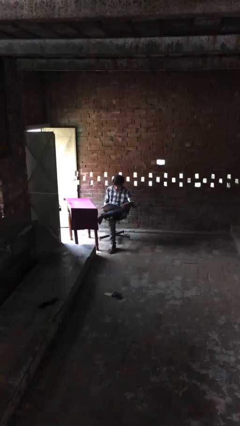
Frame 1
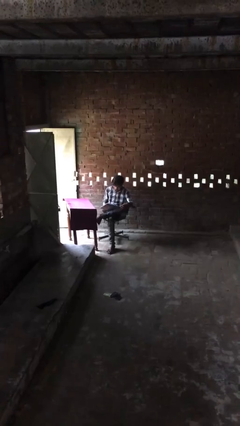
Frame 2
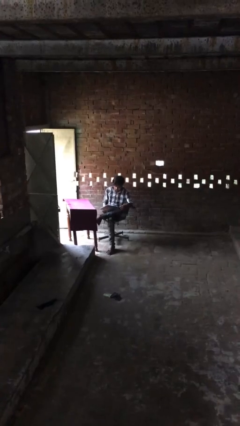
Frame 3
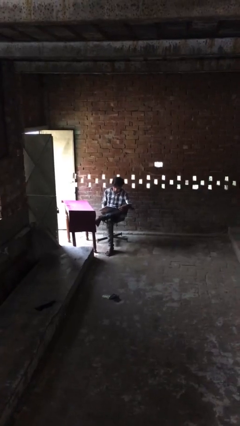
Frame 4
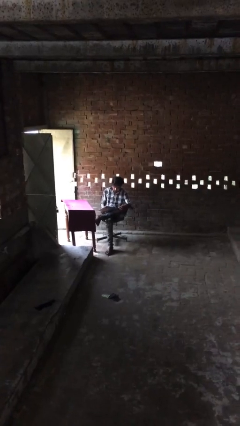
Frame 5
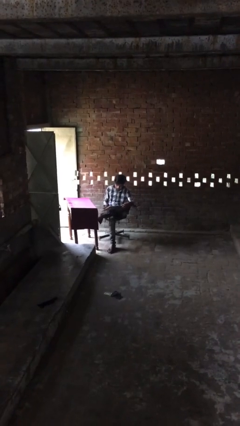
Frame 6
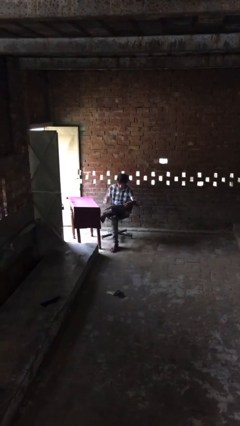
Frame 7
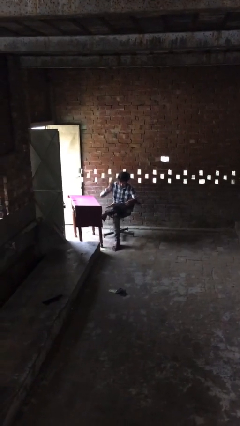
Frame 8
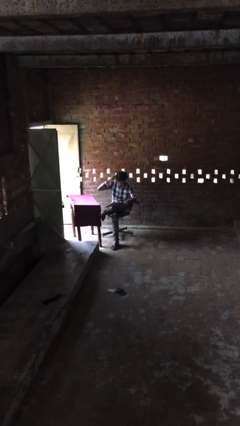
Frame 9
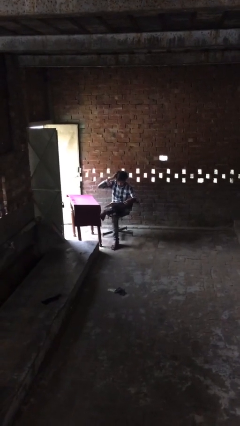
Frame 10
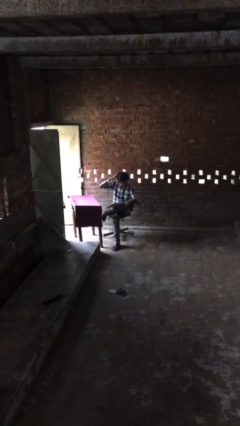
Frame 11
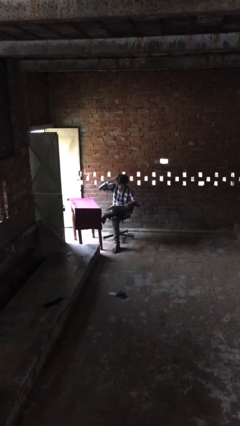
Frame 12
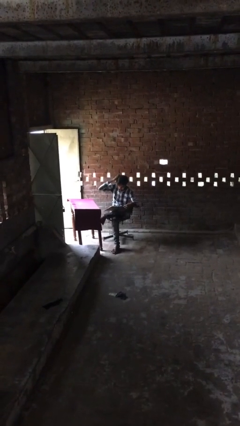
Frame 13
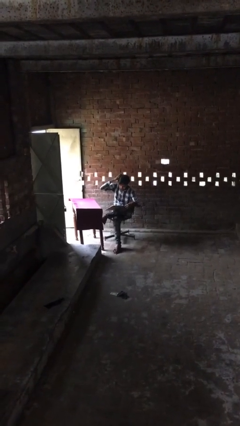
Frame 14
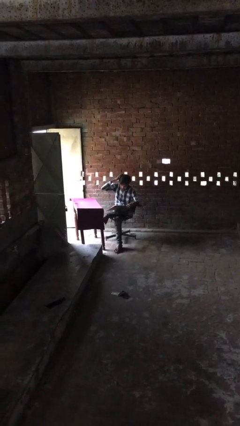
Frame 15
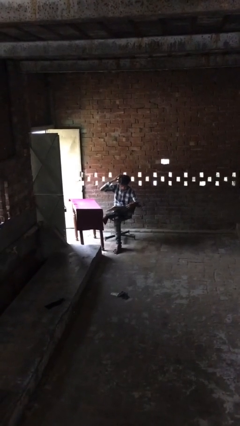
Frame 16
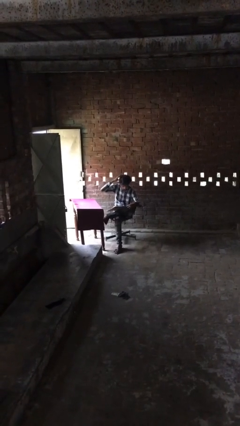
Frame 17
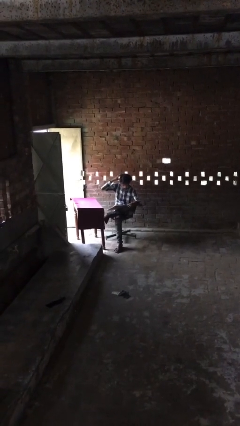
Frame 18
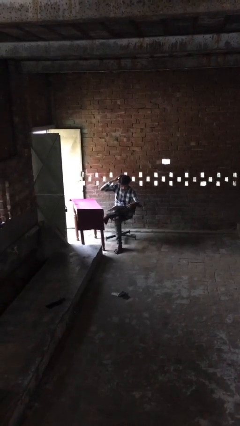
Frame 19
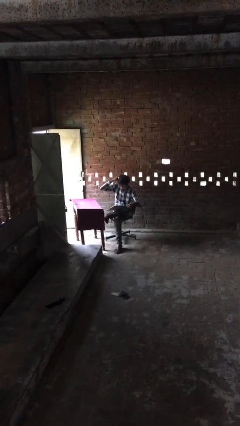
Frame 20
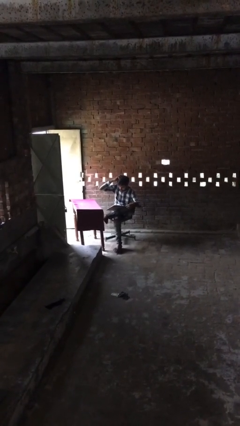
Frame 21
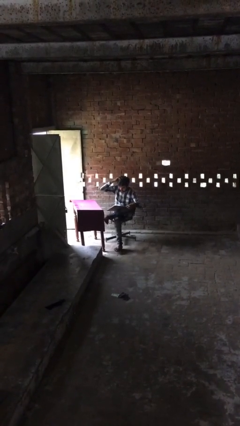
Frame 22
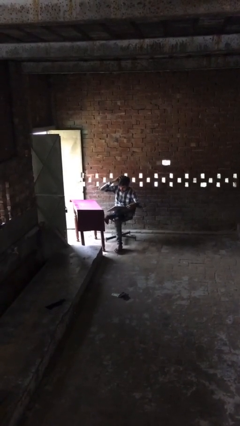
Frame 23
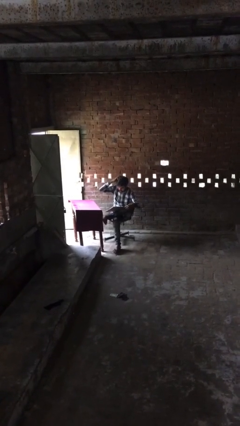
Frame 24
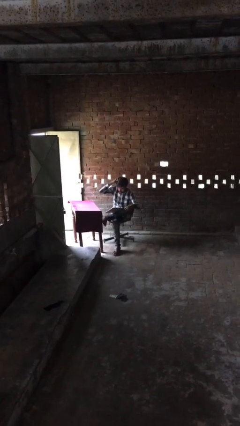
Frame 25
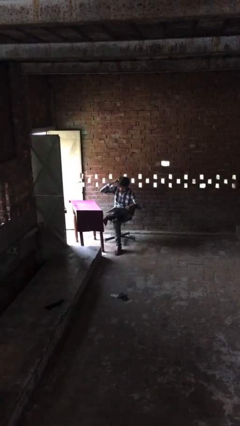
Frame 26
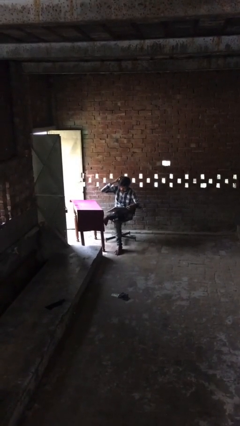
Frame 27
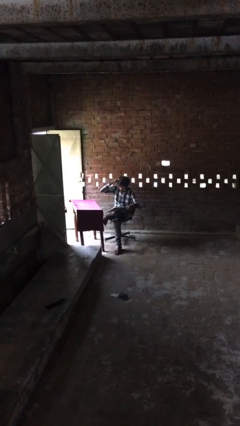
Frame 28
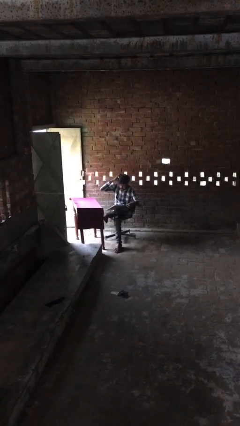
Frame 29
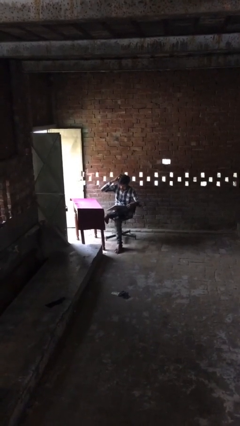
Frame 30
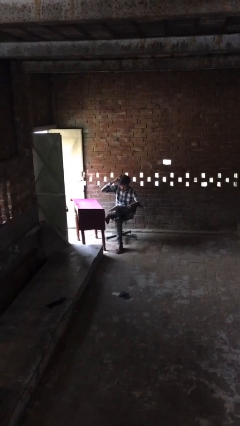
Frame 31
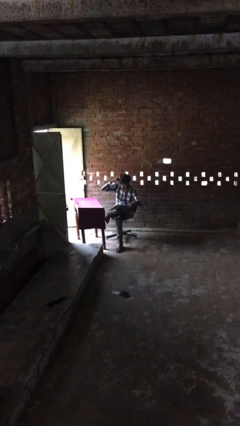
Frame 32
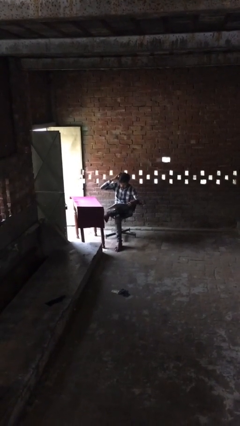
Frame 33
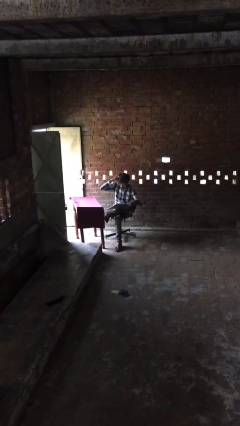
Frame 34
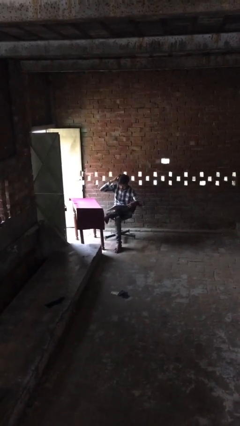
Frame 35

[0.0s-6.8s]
person reads document

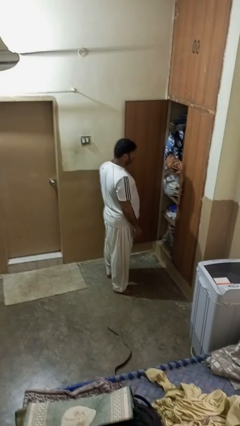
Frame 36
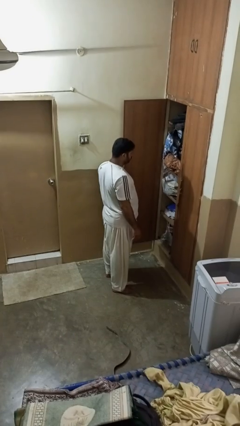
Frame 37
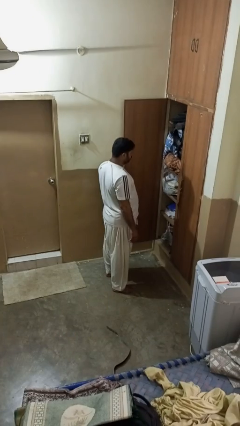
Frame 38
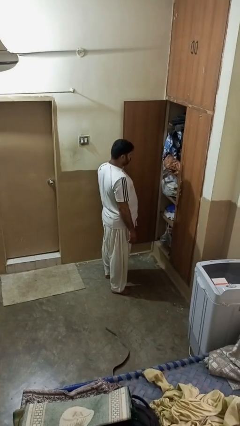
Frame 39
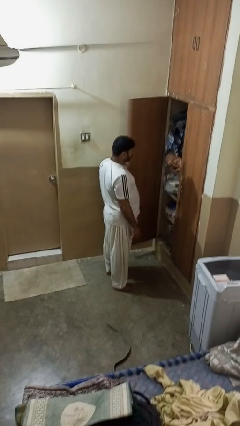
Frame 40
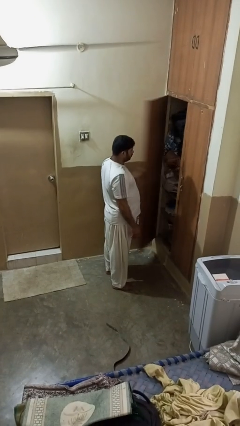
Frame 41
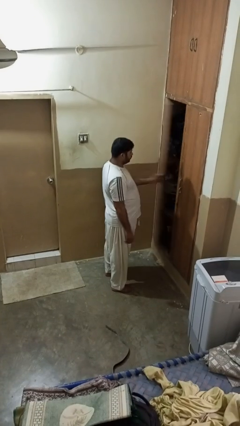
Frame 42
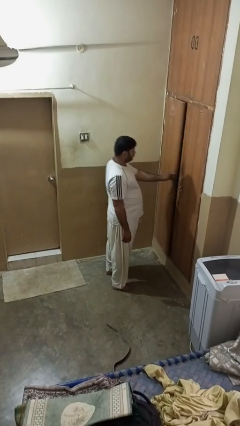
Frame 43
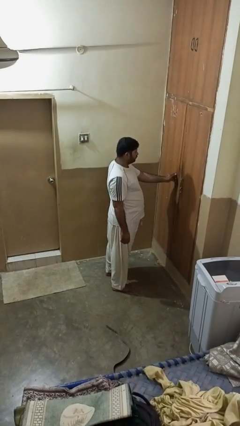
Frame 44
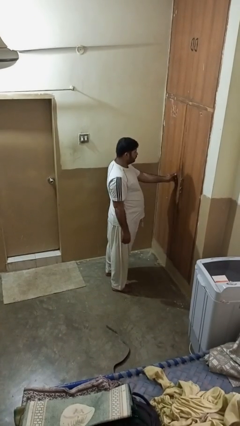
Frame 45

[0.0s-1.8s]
person closes closet door

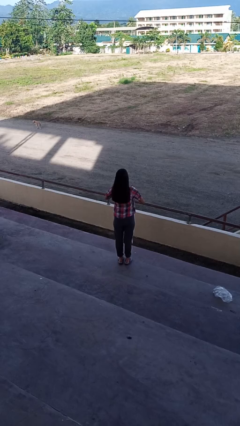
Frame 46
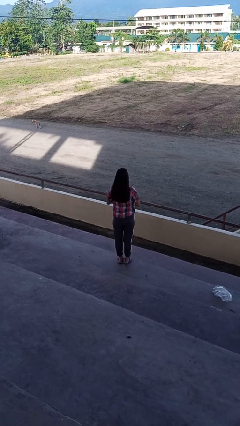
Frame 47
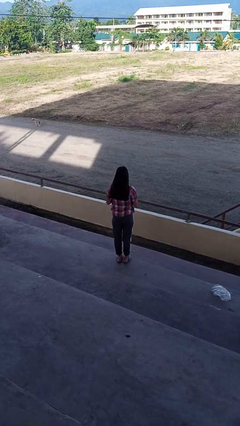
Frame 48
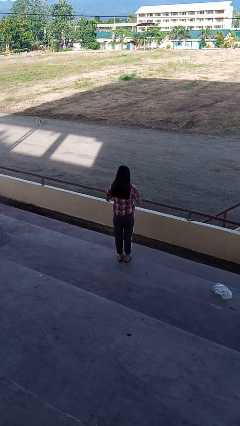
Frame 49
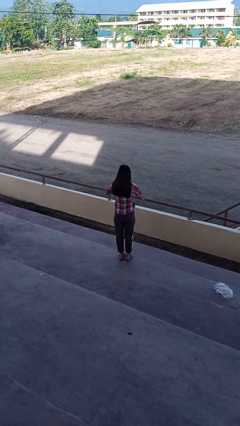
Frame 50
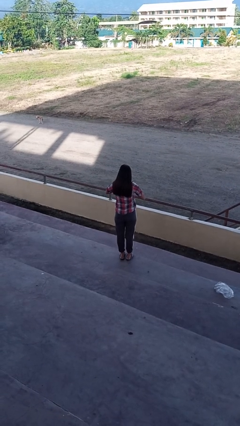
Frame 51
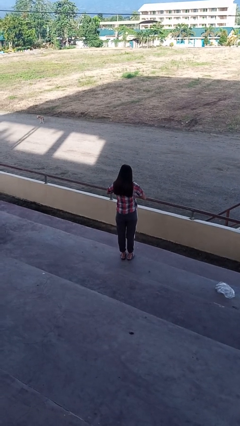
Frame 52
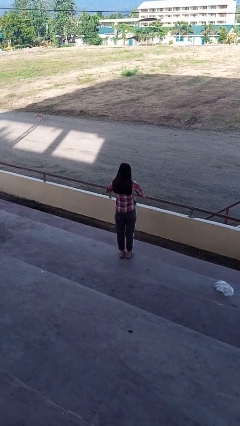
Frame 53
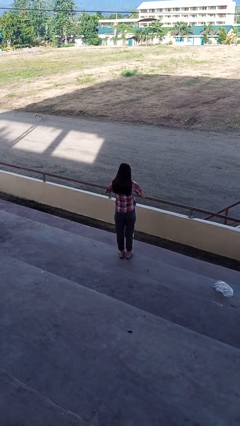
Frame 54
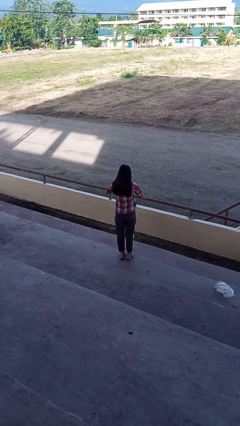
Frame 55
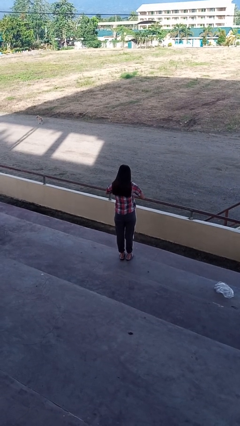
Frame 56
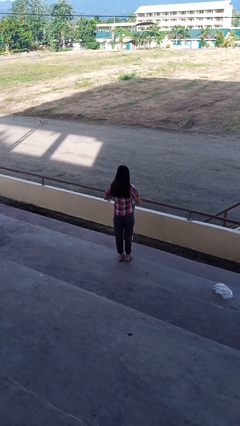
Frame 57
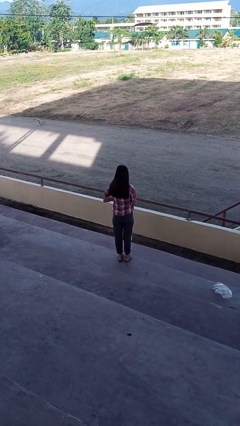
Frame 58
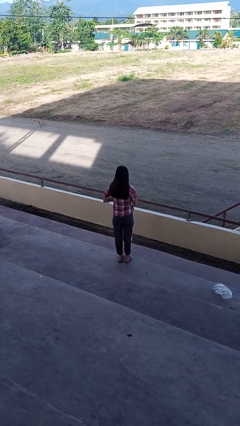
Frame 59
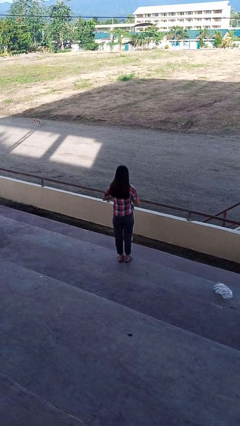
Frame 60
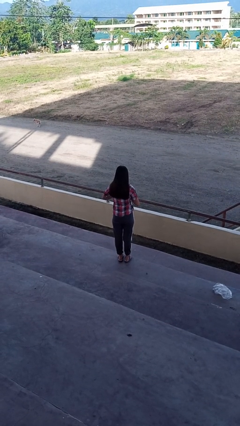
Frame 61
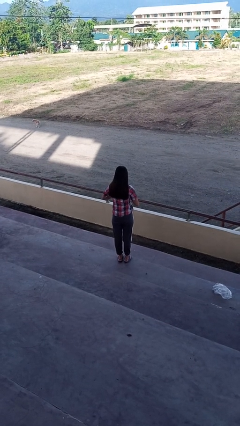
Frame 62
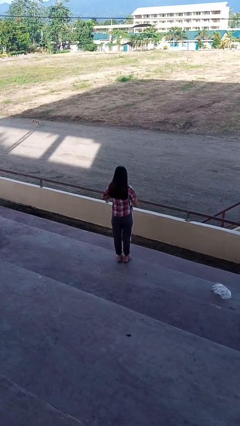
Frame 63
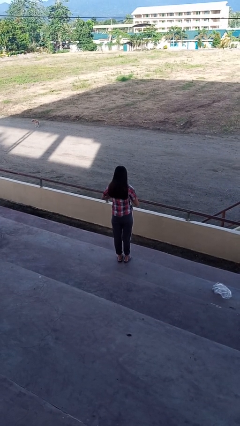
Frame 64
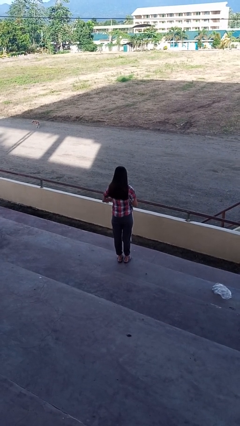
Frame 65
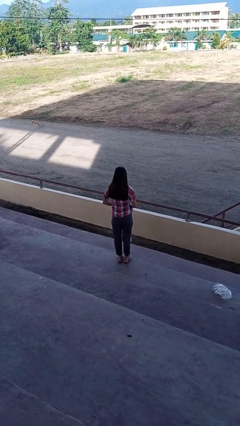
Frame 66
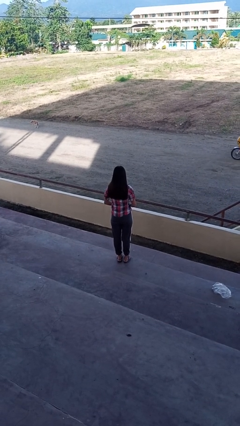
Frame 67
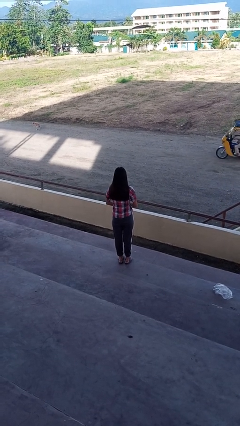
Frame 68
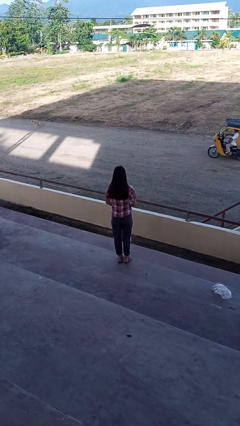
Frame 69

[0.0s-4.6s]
person buttons shirt

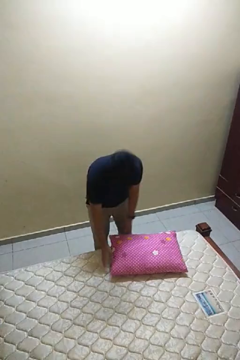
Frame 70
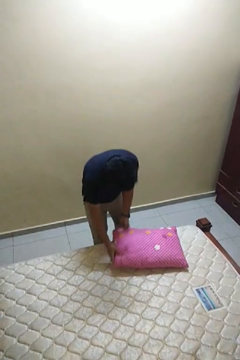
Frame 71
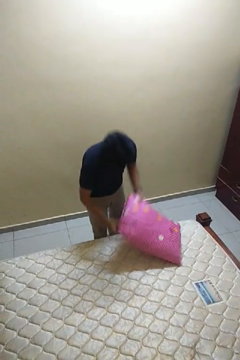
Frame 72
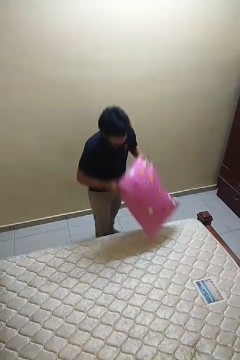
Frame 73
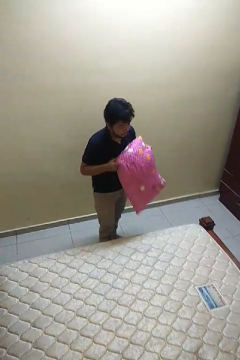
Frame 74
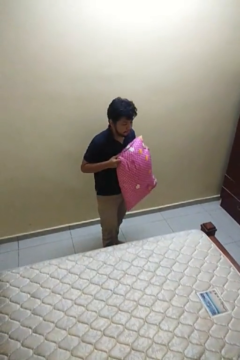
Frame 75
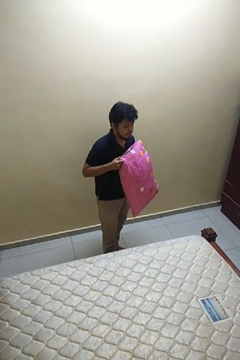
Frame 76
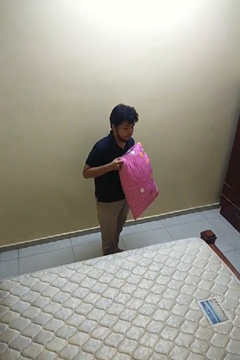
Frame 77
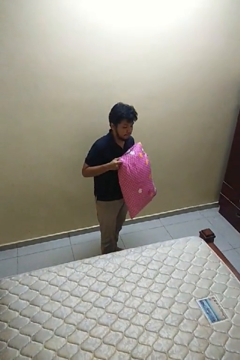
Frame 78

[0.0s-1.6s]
person picks up object from bed

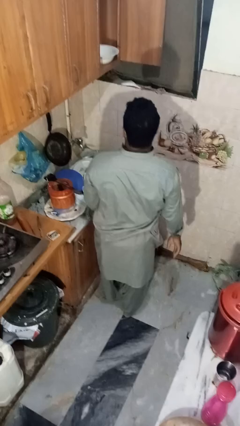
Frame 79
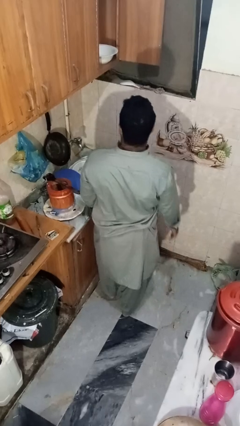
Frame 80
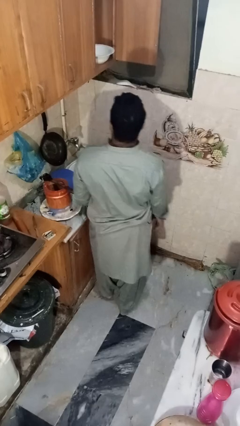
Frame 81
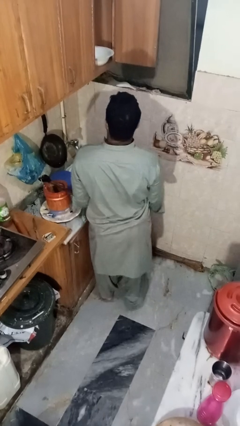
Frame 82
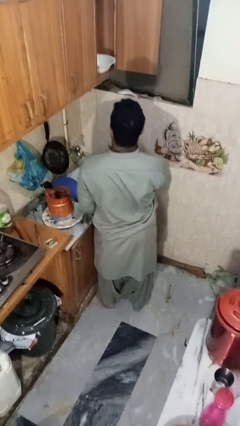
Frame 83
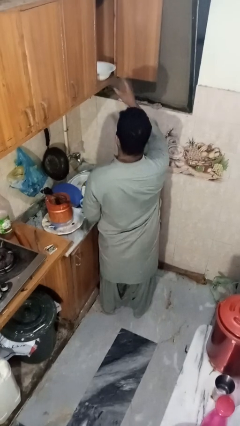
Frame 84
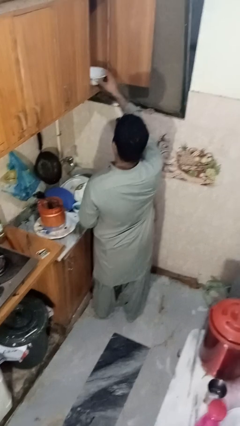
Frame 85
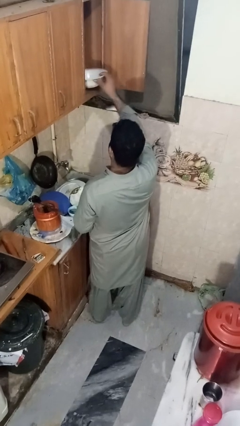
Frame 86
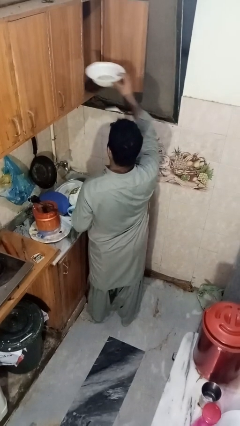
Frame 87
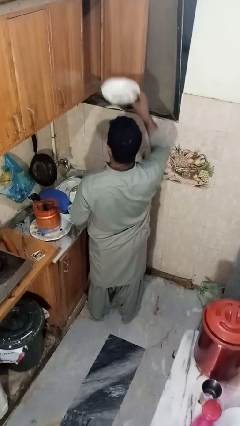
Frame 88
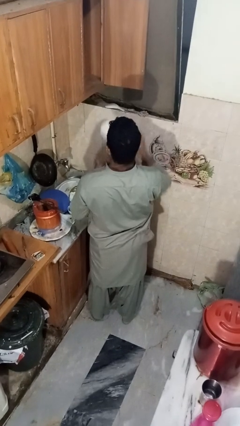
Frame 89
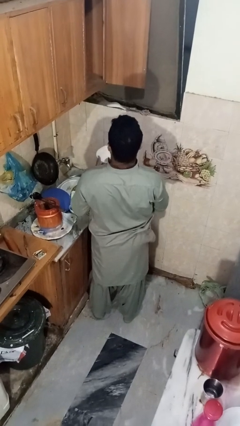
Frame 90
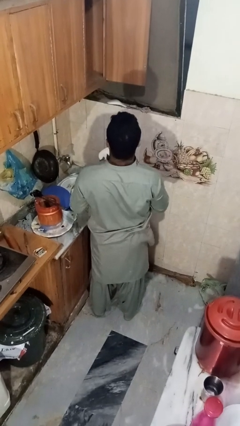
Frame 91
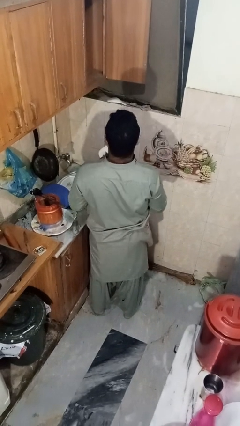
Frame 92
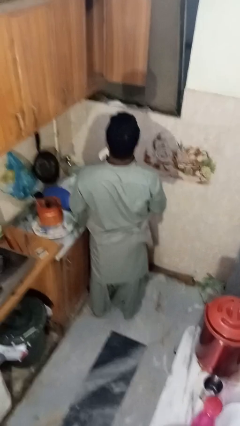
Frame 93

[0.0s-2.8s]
person takes object from cabinet
